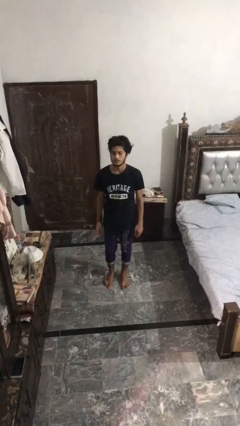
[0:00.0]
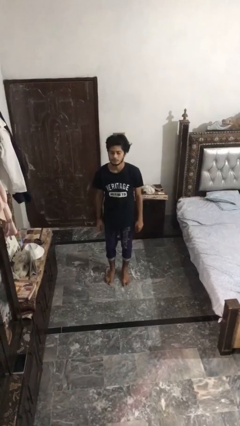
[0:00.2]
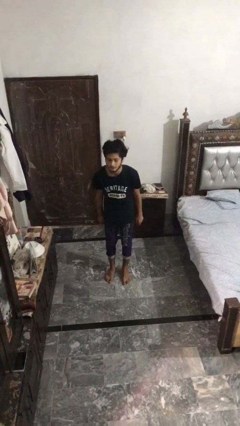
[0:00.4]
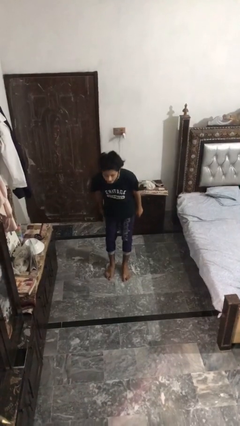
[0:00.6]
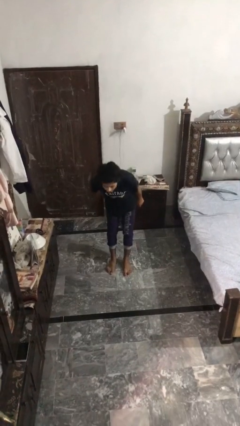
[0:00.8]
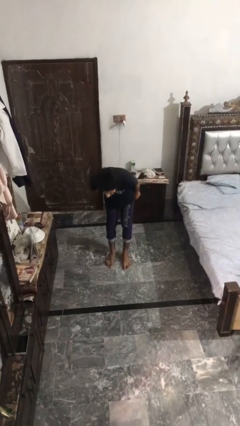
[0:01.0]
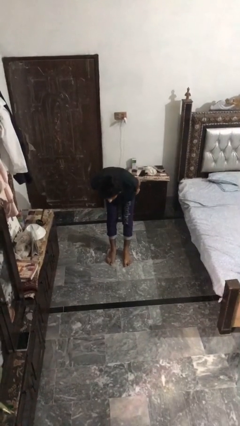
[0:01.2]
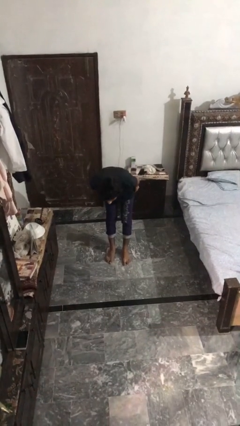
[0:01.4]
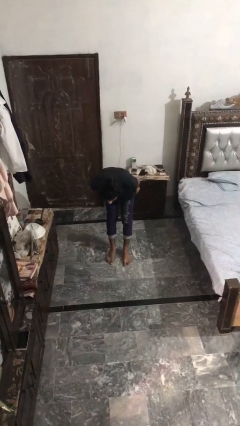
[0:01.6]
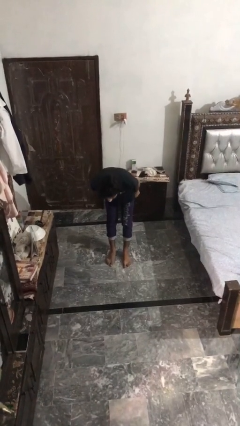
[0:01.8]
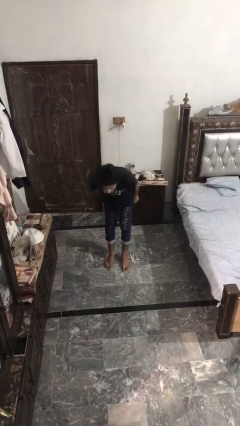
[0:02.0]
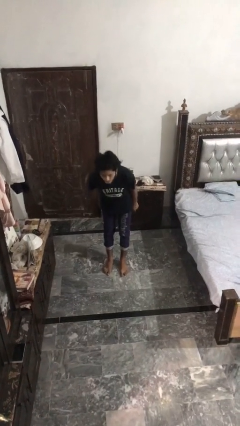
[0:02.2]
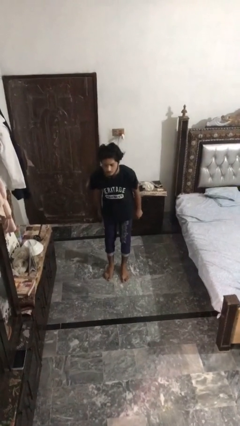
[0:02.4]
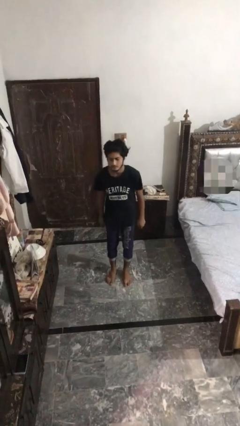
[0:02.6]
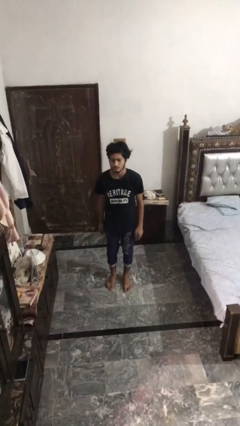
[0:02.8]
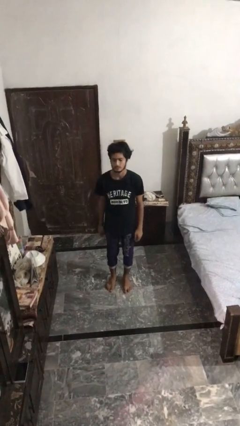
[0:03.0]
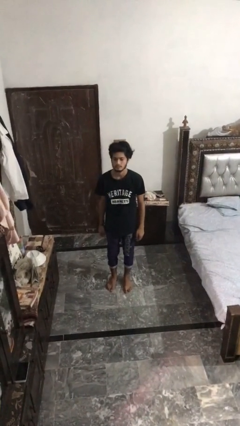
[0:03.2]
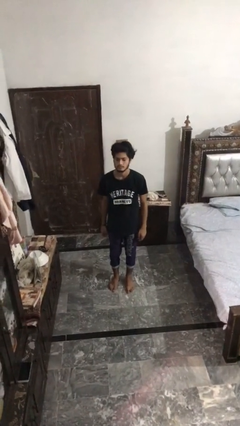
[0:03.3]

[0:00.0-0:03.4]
person bows

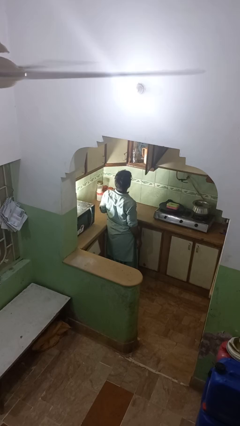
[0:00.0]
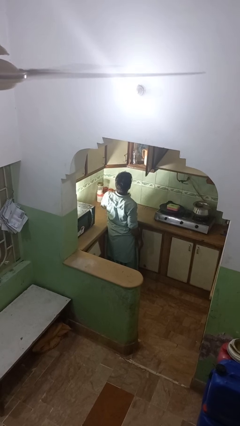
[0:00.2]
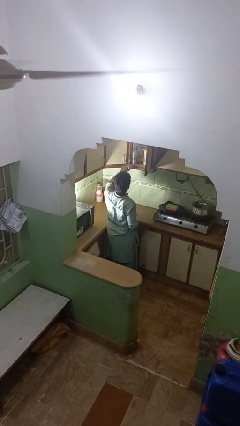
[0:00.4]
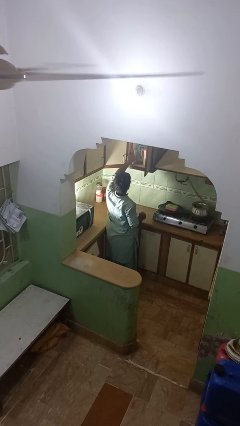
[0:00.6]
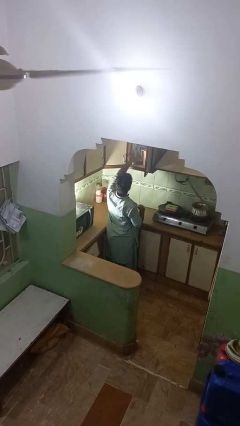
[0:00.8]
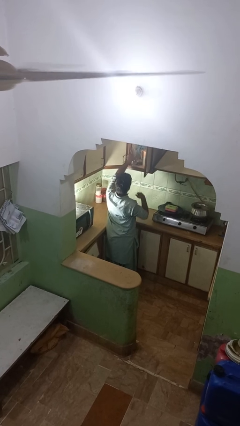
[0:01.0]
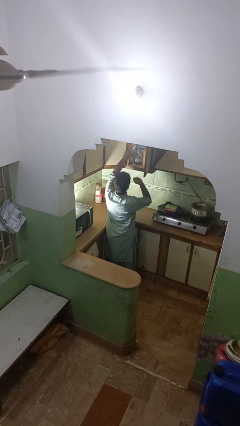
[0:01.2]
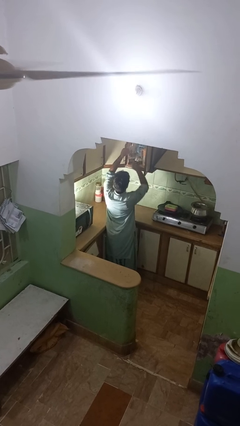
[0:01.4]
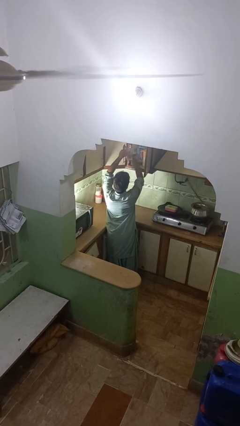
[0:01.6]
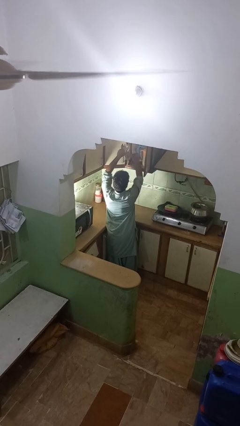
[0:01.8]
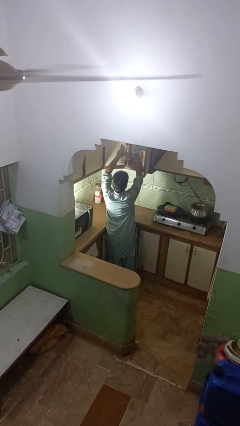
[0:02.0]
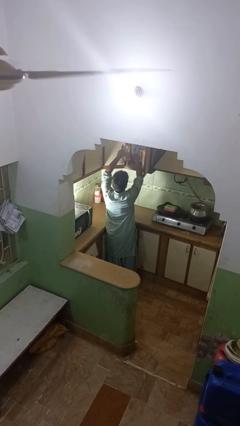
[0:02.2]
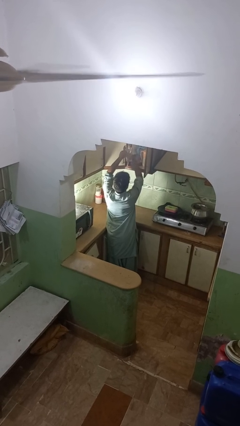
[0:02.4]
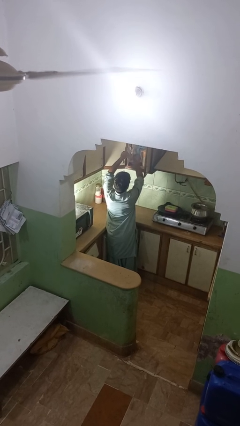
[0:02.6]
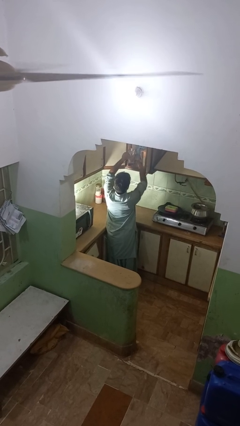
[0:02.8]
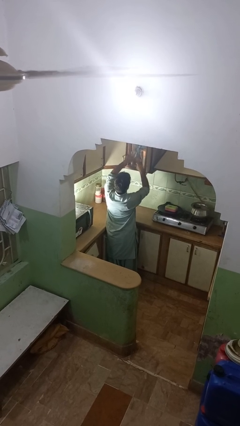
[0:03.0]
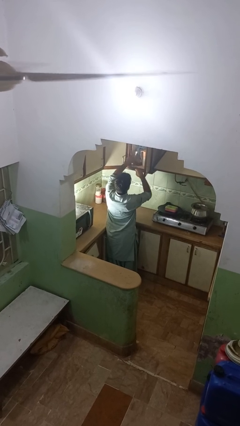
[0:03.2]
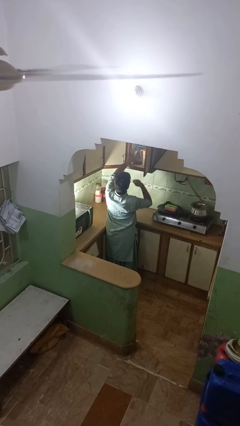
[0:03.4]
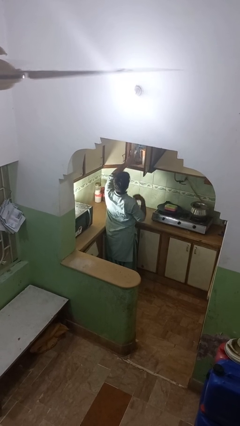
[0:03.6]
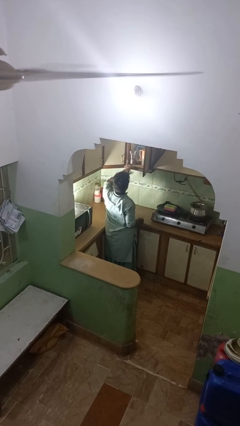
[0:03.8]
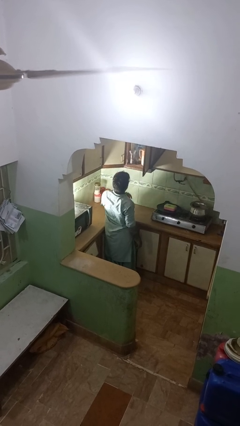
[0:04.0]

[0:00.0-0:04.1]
person searches in kitchen drawer

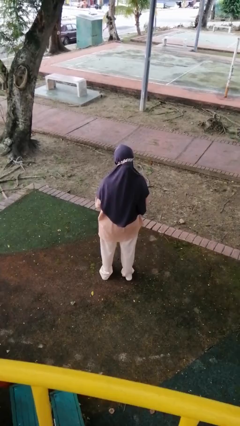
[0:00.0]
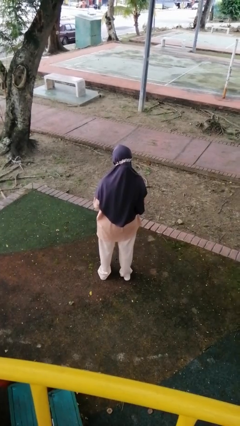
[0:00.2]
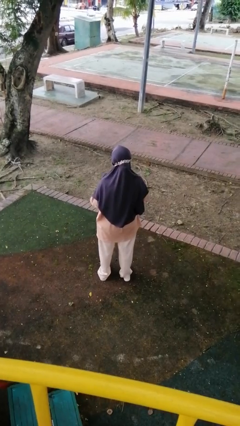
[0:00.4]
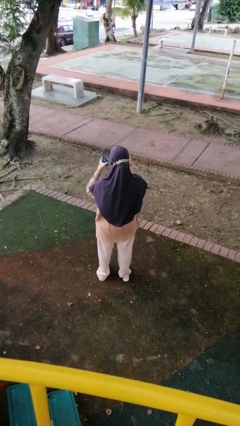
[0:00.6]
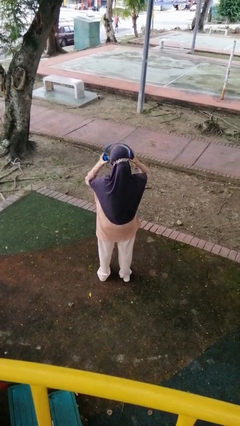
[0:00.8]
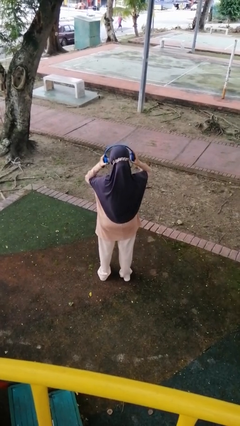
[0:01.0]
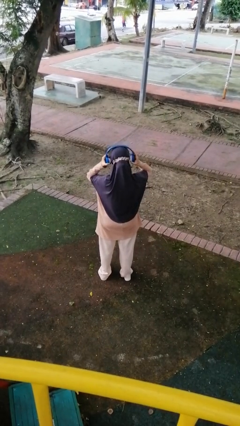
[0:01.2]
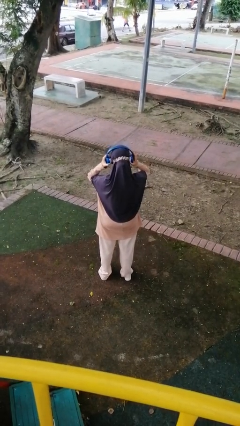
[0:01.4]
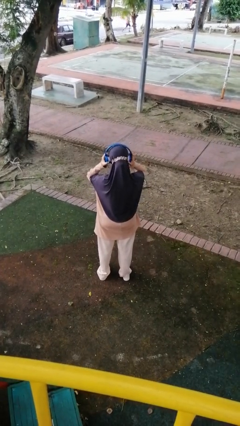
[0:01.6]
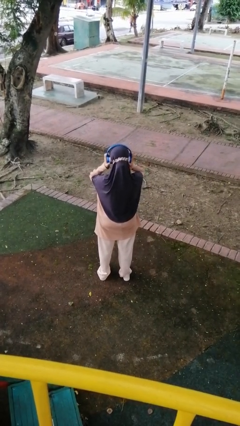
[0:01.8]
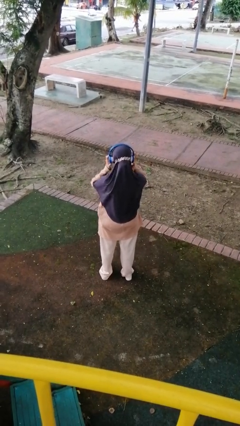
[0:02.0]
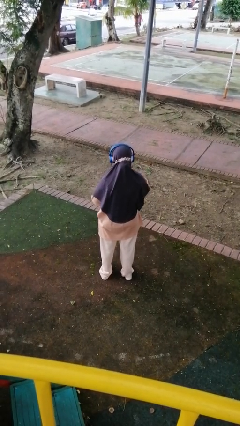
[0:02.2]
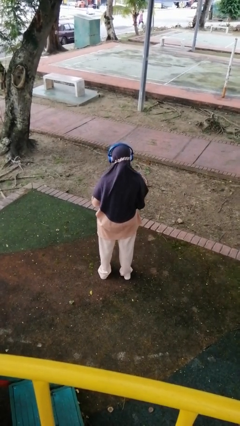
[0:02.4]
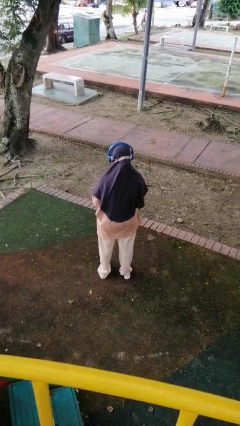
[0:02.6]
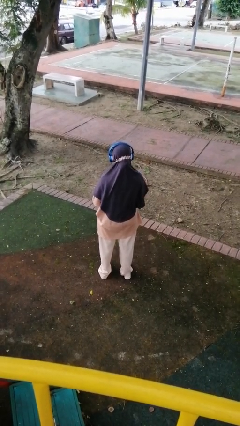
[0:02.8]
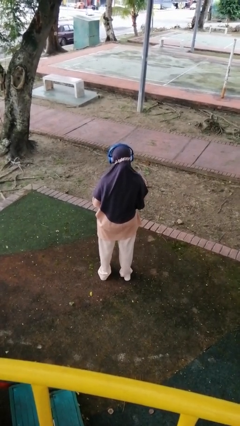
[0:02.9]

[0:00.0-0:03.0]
person puts on headphones

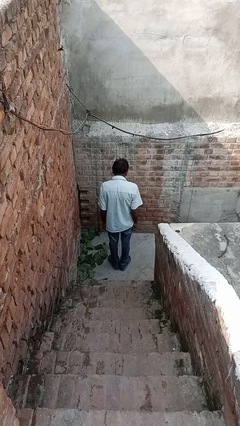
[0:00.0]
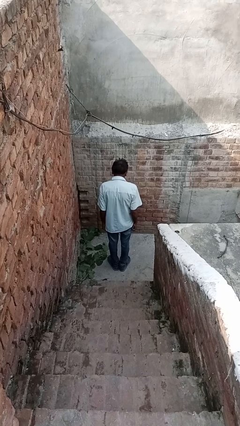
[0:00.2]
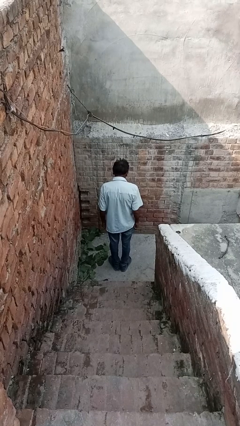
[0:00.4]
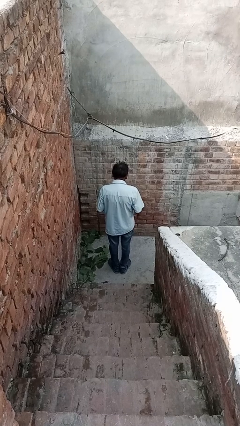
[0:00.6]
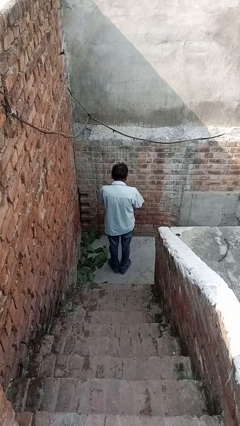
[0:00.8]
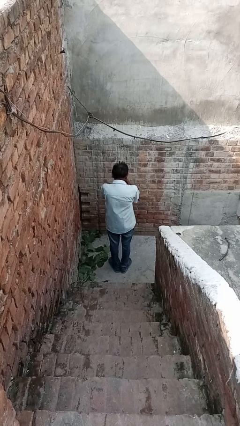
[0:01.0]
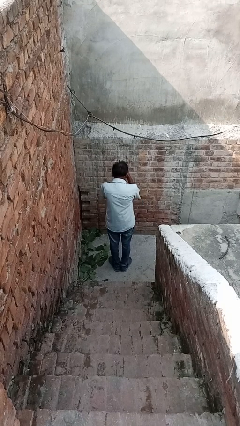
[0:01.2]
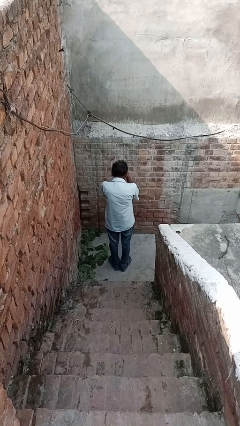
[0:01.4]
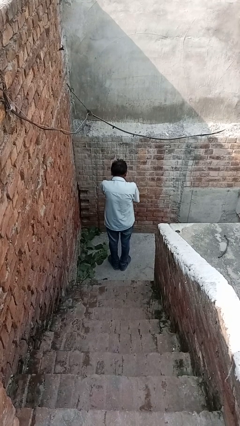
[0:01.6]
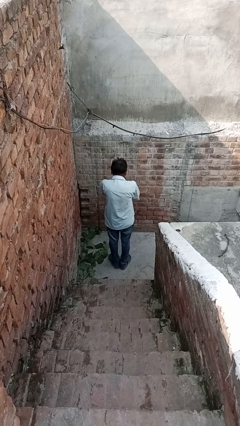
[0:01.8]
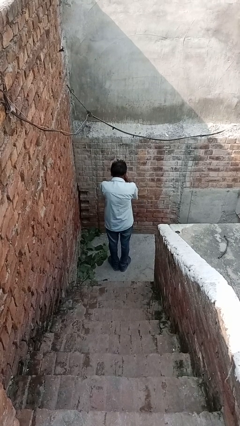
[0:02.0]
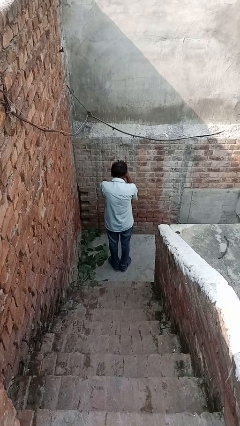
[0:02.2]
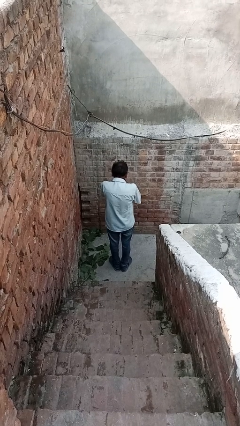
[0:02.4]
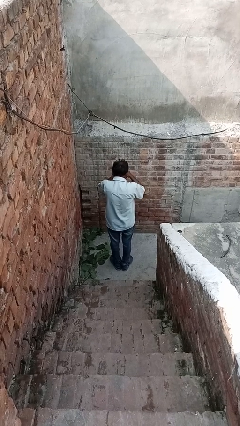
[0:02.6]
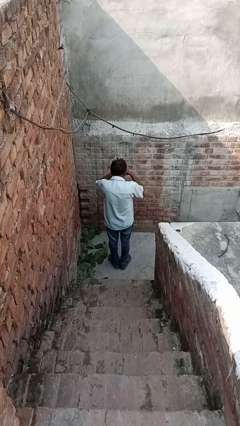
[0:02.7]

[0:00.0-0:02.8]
person blows into hands

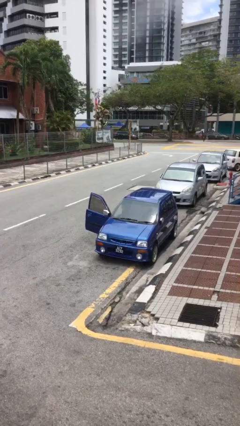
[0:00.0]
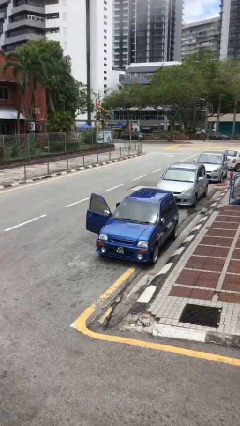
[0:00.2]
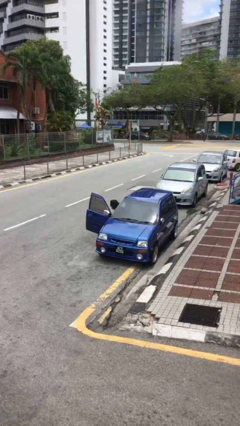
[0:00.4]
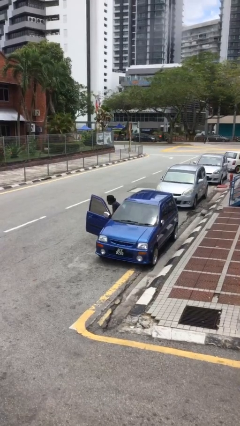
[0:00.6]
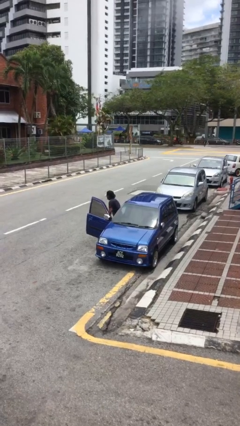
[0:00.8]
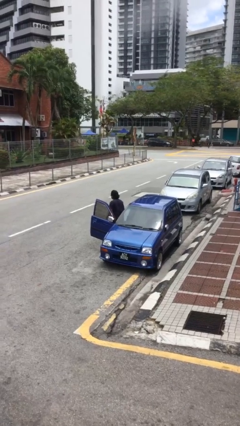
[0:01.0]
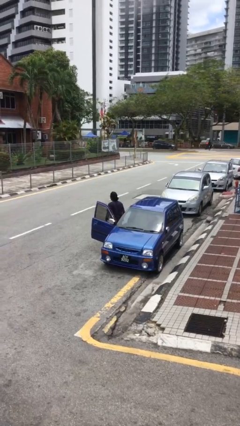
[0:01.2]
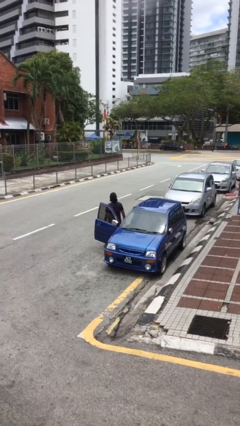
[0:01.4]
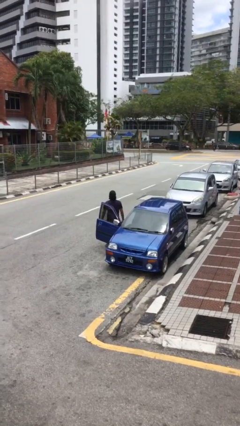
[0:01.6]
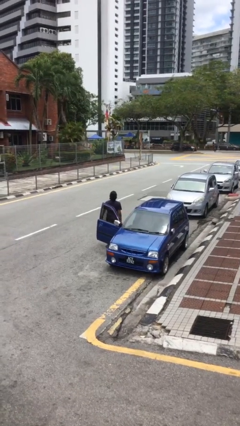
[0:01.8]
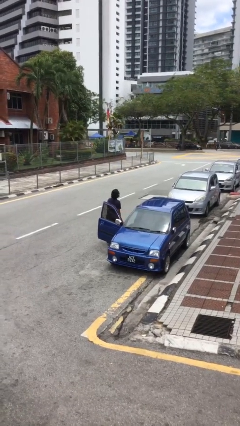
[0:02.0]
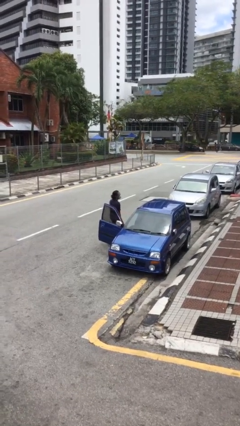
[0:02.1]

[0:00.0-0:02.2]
person exits car

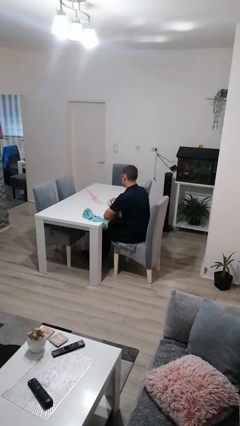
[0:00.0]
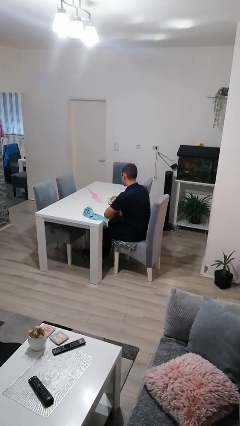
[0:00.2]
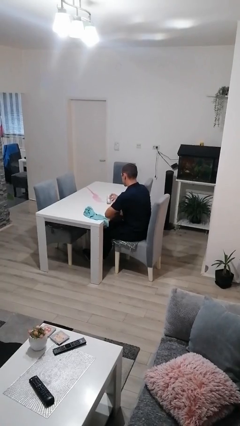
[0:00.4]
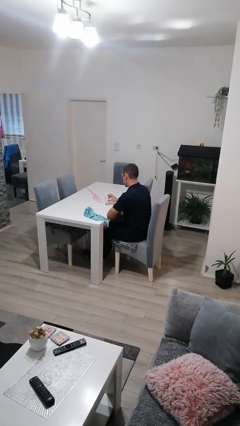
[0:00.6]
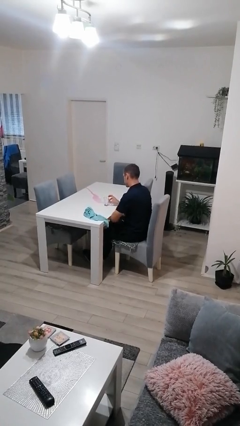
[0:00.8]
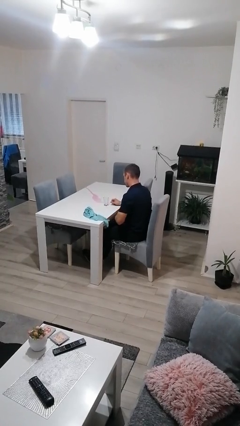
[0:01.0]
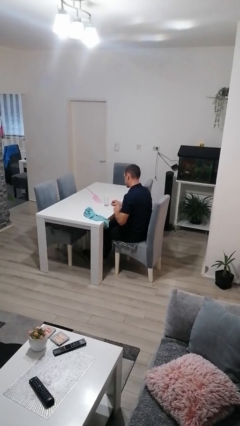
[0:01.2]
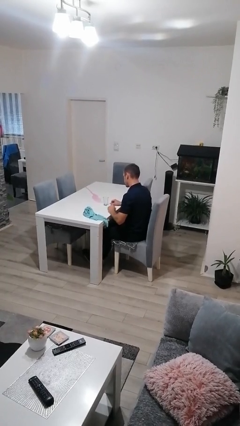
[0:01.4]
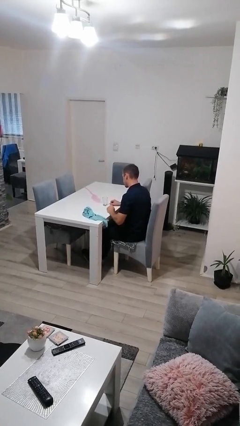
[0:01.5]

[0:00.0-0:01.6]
person sets upright glass

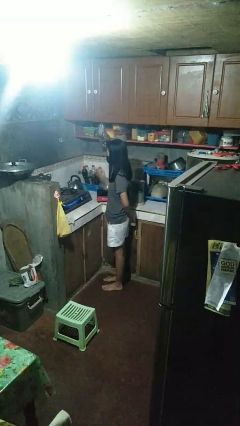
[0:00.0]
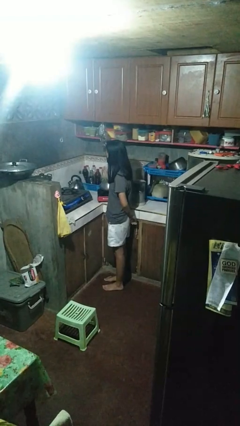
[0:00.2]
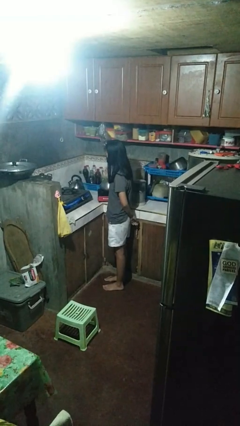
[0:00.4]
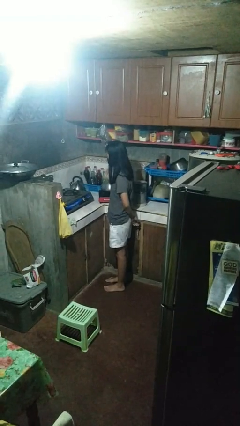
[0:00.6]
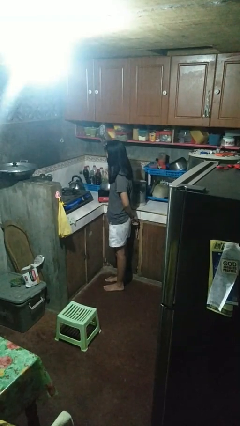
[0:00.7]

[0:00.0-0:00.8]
person burns hand
